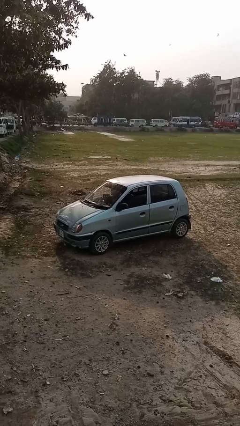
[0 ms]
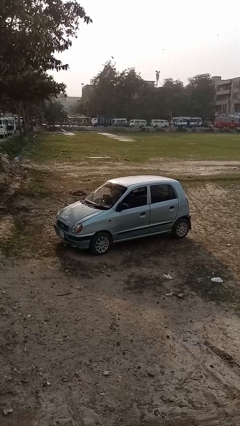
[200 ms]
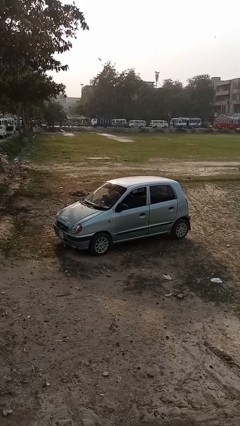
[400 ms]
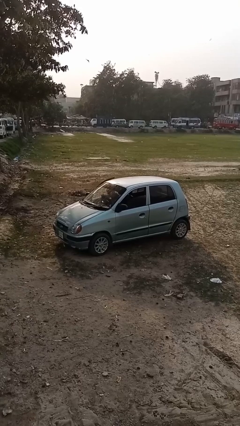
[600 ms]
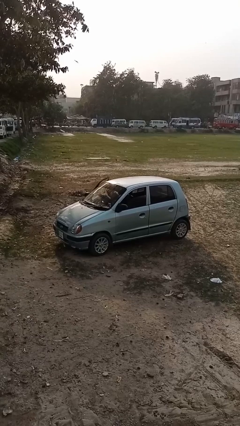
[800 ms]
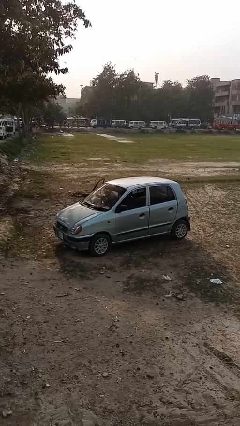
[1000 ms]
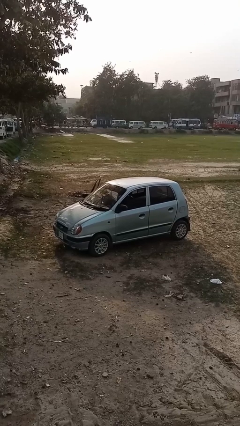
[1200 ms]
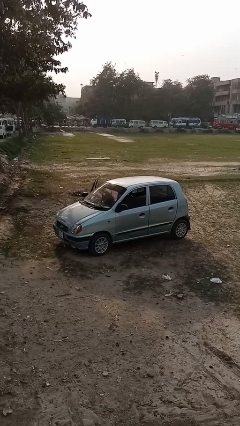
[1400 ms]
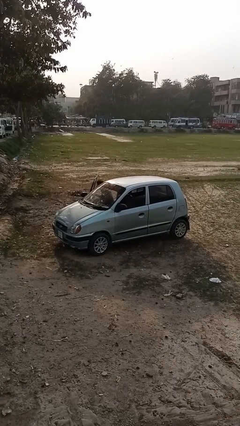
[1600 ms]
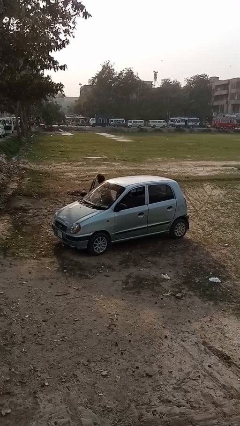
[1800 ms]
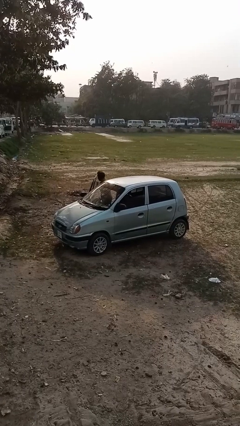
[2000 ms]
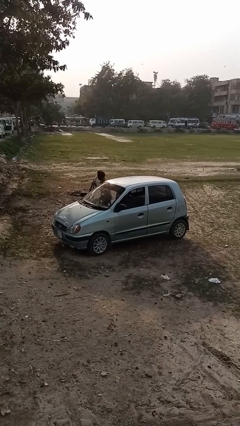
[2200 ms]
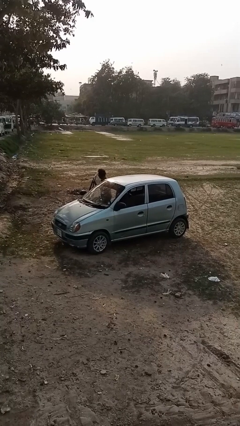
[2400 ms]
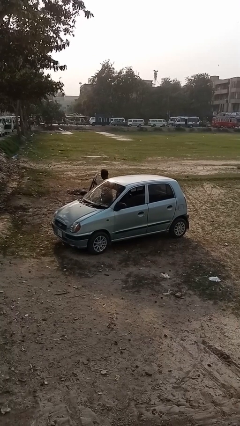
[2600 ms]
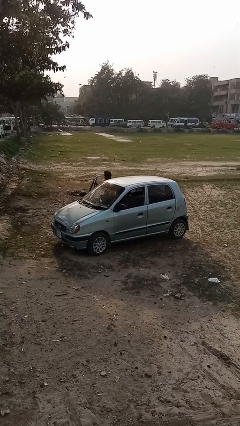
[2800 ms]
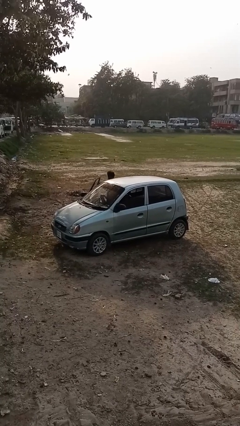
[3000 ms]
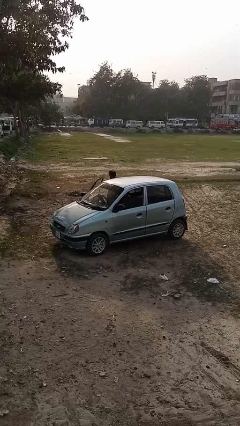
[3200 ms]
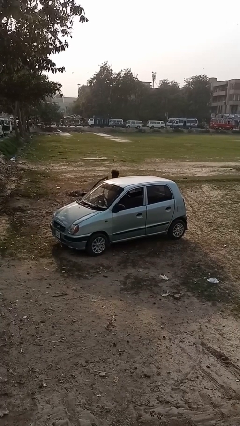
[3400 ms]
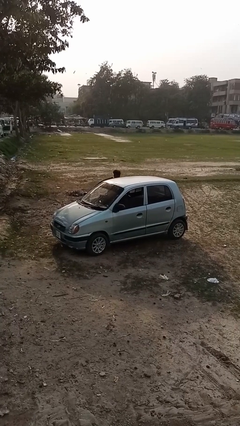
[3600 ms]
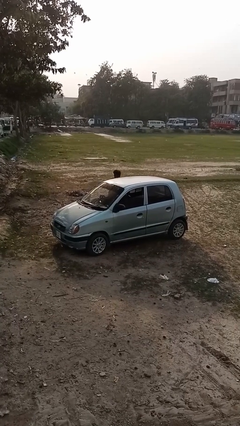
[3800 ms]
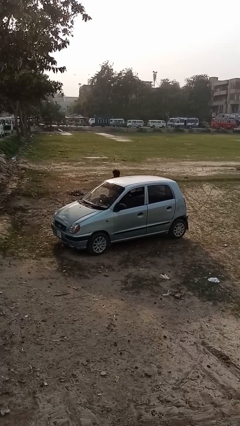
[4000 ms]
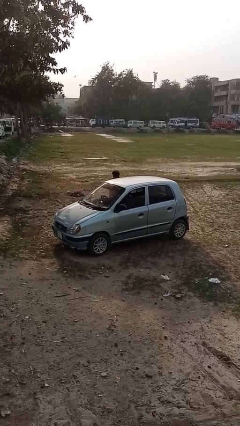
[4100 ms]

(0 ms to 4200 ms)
car drops off person

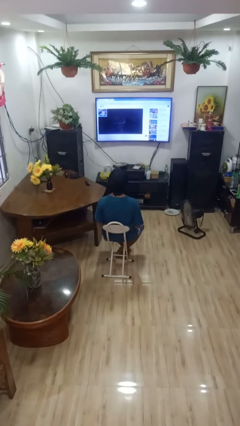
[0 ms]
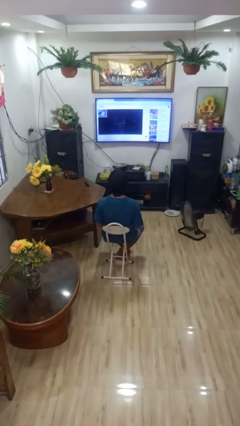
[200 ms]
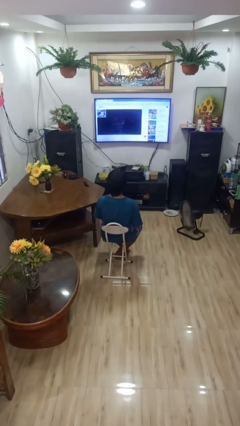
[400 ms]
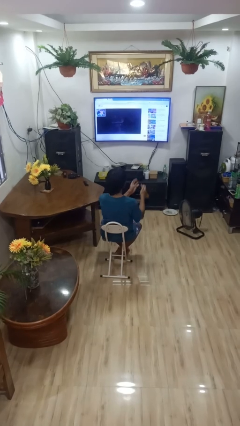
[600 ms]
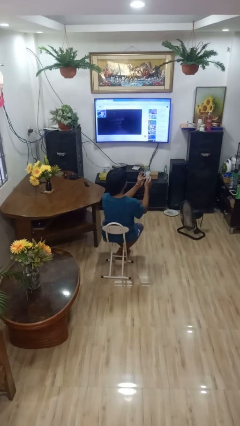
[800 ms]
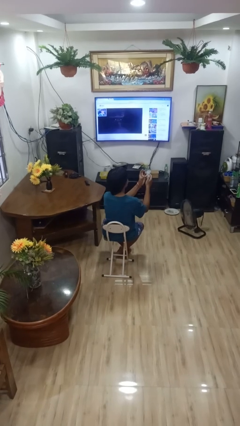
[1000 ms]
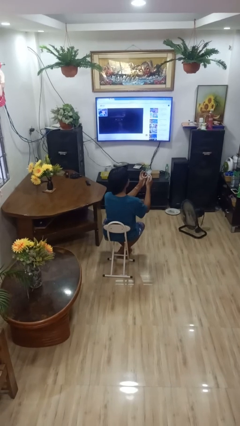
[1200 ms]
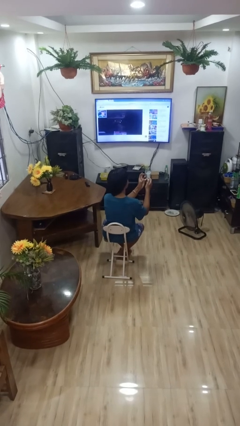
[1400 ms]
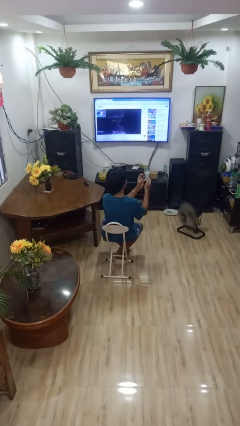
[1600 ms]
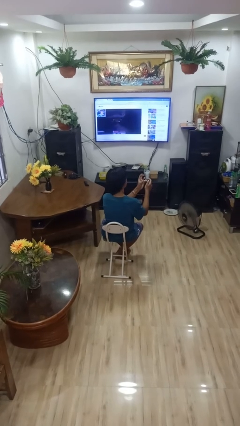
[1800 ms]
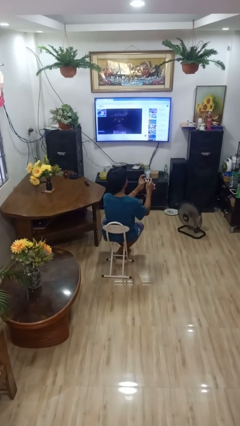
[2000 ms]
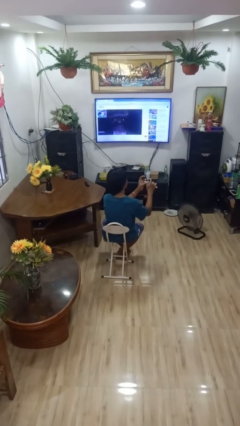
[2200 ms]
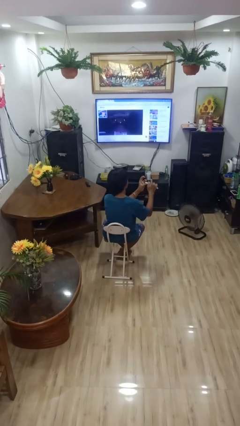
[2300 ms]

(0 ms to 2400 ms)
person files fingernails

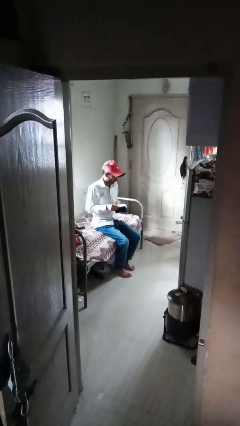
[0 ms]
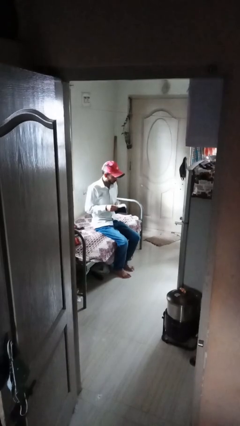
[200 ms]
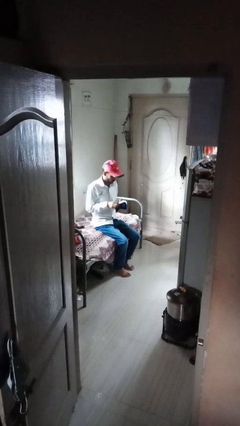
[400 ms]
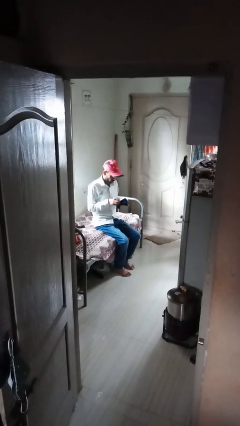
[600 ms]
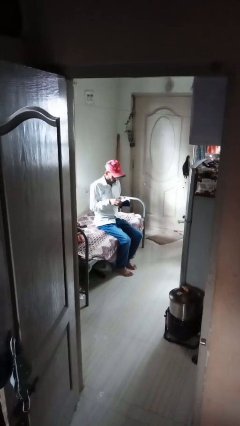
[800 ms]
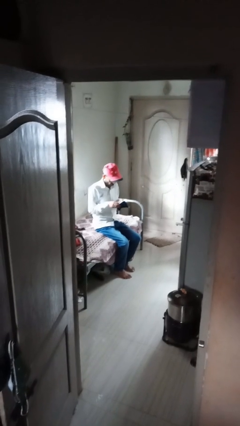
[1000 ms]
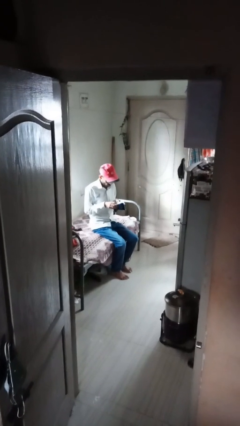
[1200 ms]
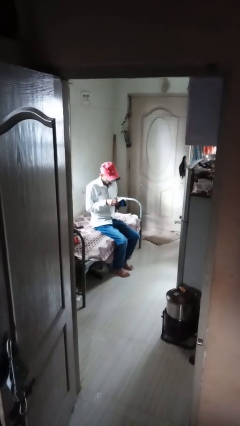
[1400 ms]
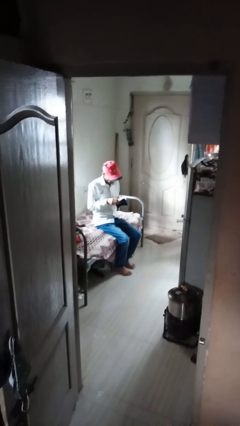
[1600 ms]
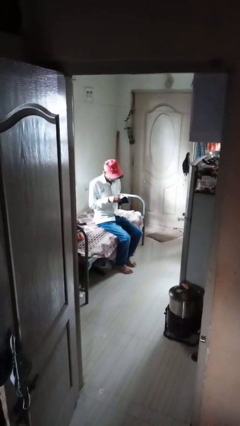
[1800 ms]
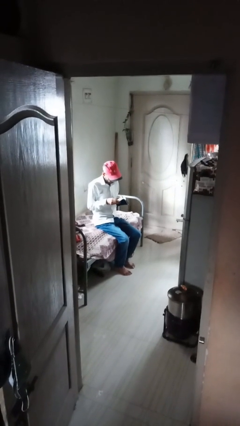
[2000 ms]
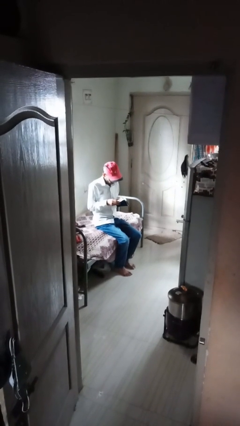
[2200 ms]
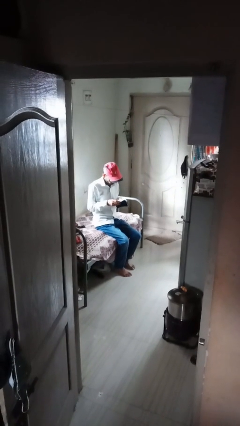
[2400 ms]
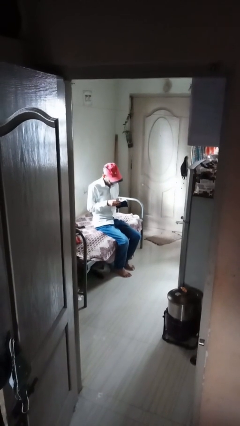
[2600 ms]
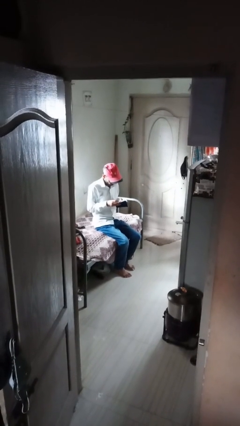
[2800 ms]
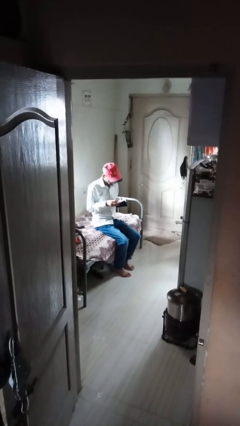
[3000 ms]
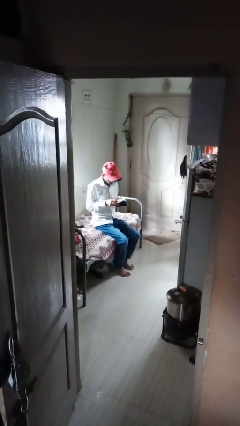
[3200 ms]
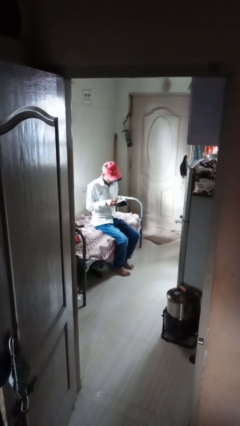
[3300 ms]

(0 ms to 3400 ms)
person searches in purse

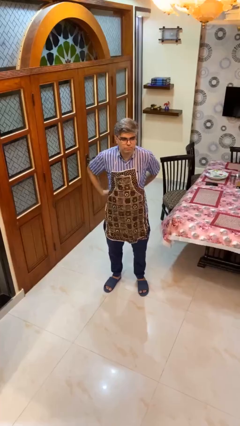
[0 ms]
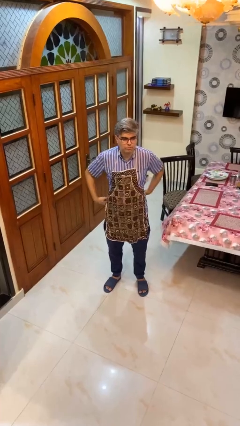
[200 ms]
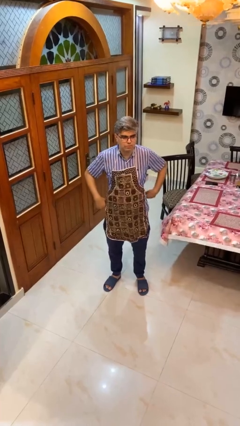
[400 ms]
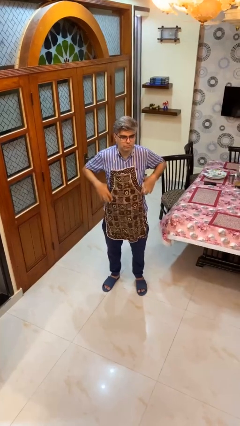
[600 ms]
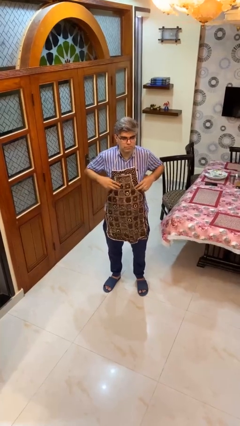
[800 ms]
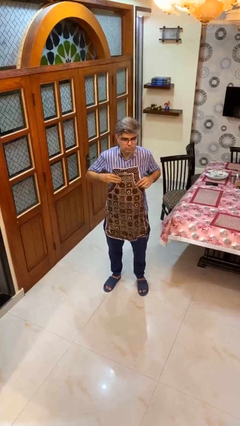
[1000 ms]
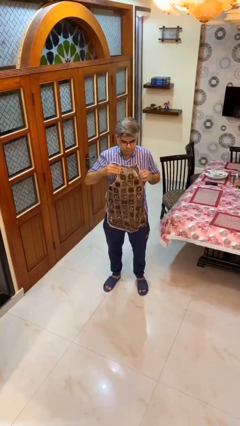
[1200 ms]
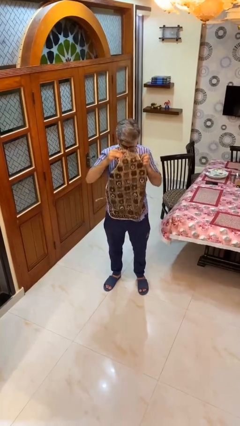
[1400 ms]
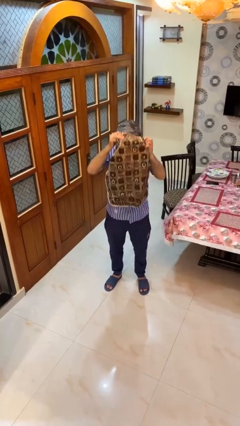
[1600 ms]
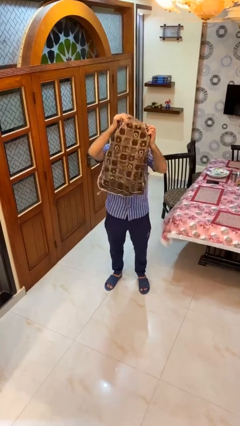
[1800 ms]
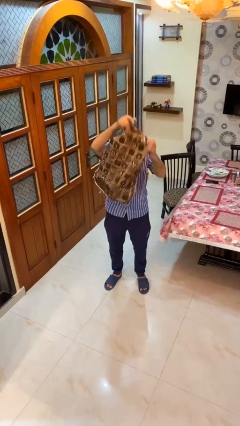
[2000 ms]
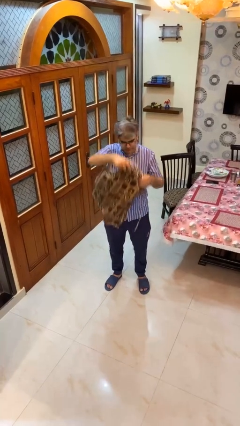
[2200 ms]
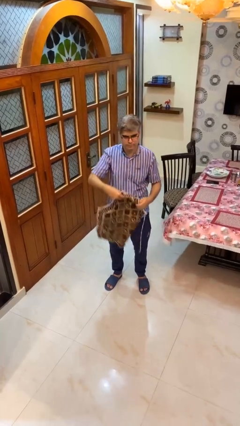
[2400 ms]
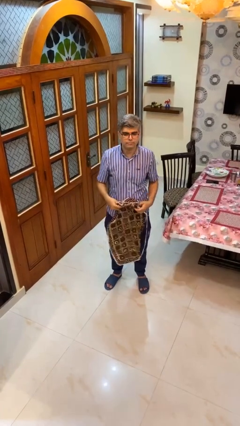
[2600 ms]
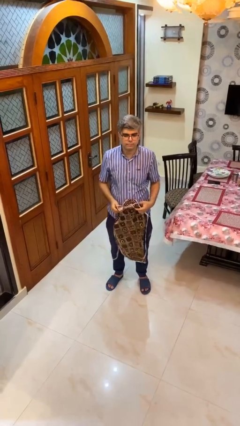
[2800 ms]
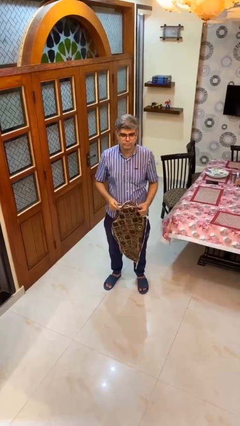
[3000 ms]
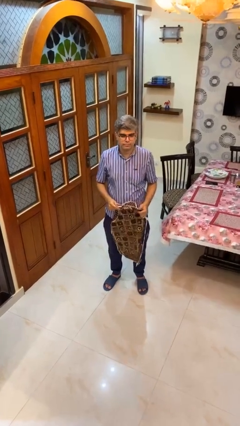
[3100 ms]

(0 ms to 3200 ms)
person takes off apron

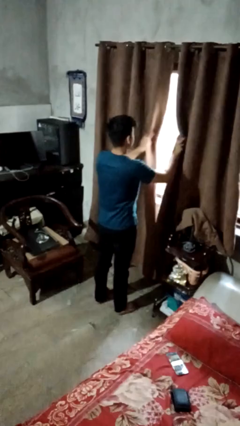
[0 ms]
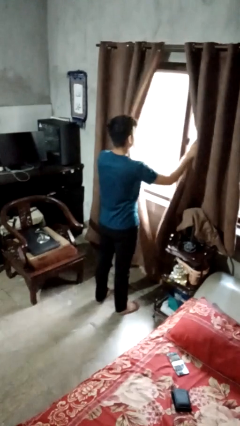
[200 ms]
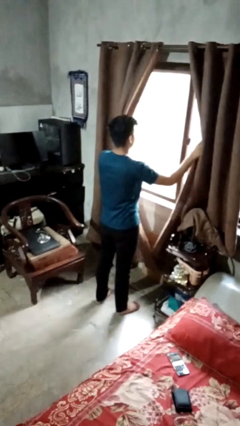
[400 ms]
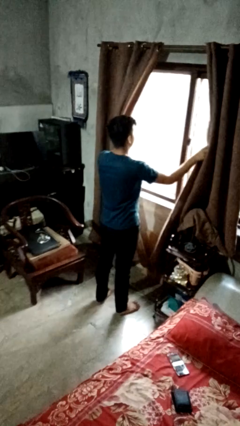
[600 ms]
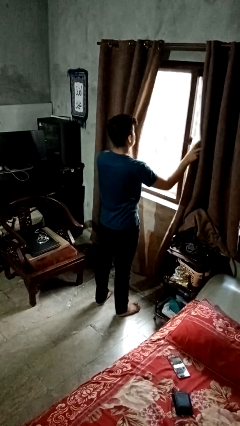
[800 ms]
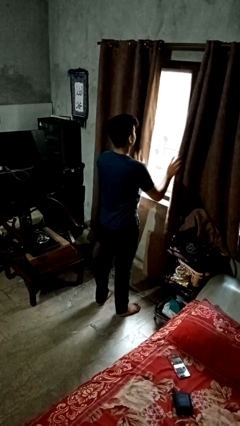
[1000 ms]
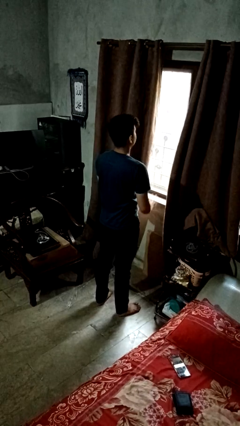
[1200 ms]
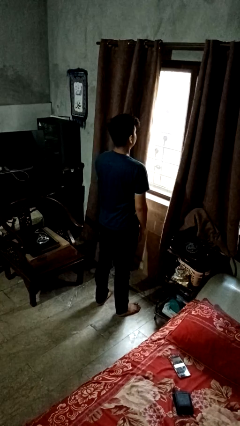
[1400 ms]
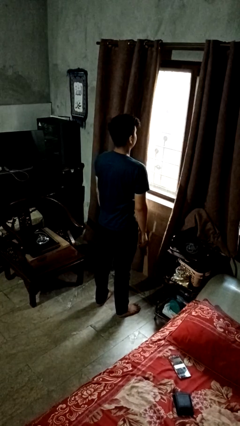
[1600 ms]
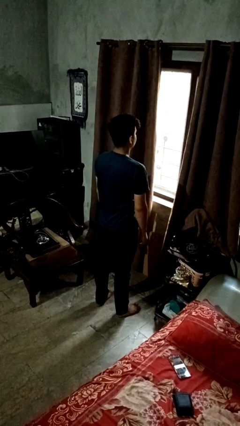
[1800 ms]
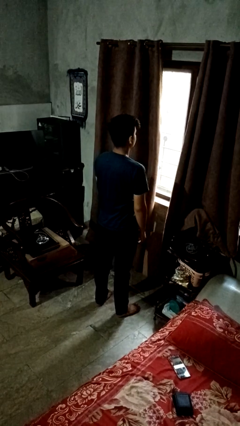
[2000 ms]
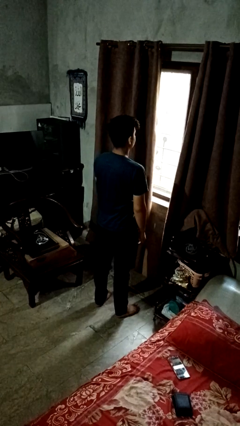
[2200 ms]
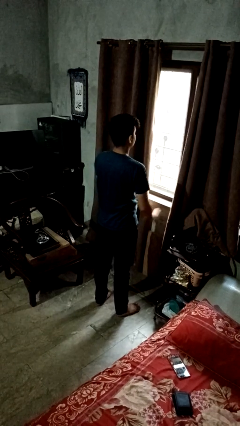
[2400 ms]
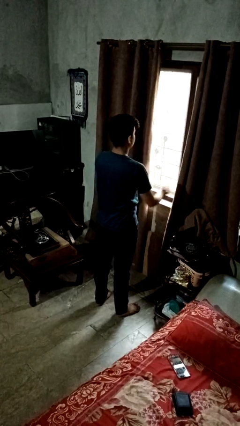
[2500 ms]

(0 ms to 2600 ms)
person opens curtains

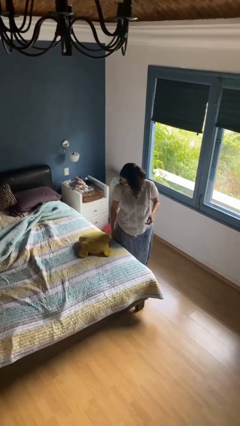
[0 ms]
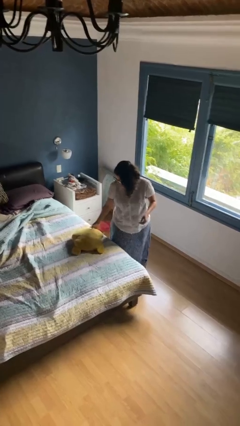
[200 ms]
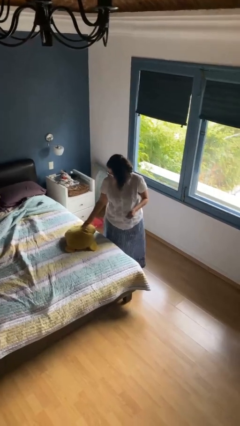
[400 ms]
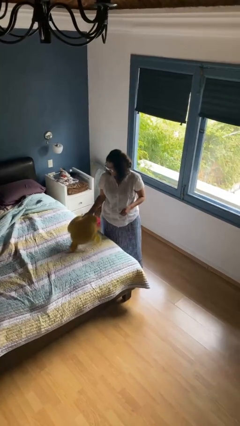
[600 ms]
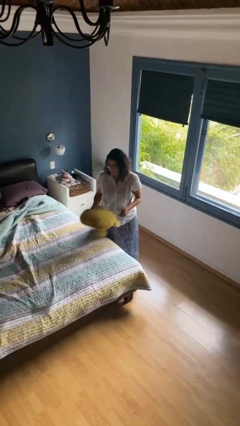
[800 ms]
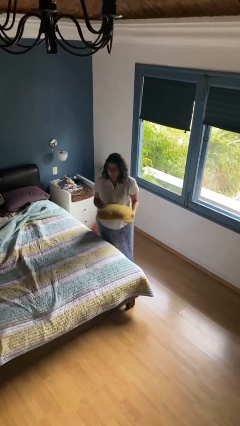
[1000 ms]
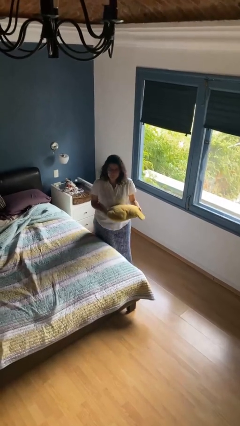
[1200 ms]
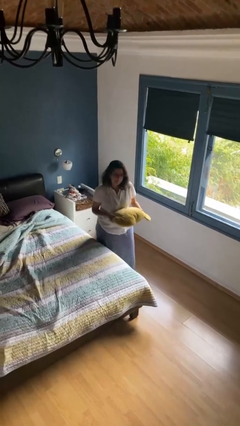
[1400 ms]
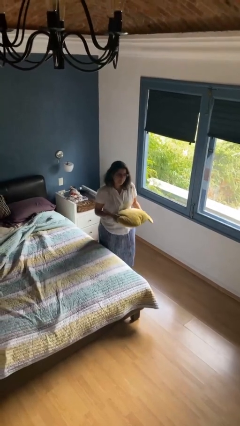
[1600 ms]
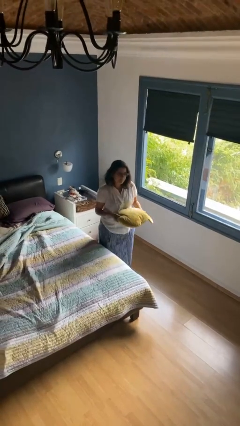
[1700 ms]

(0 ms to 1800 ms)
person picks up object from bed
